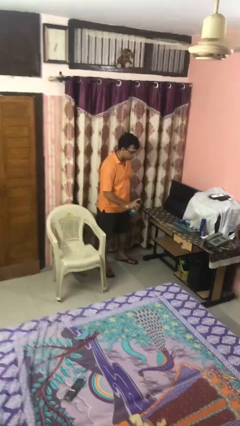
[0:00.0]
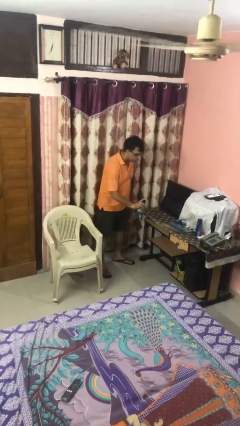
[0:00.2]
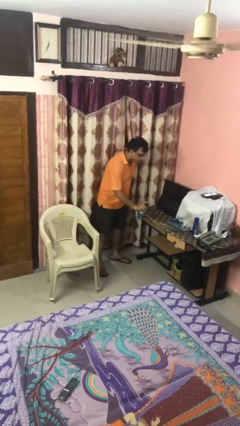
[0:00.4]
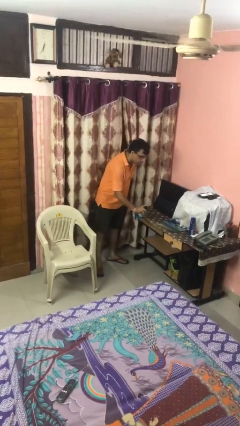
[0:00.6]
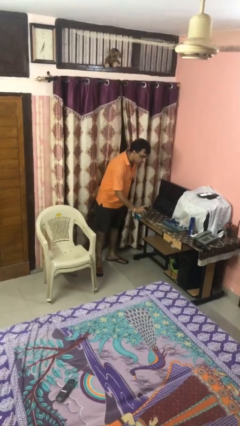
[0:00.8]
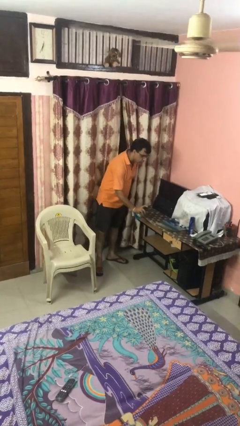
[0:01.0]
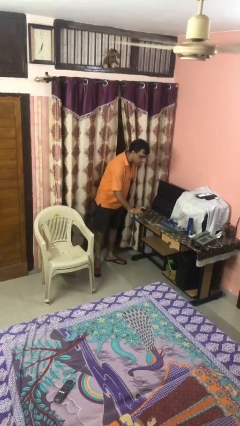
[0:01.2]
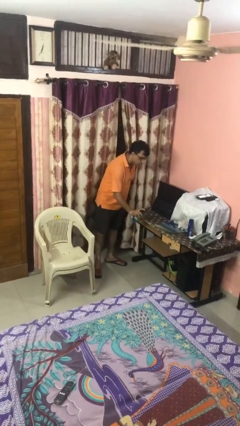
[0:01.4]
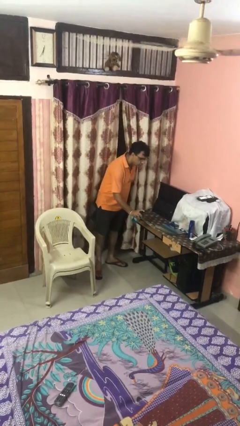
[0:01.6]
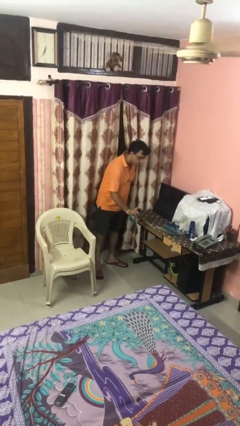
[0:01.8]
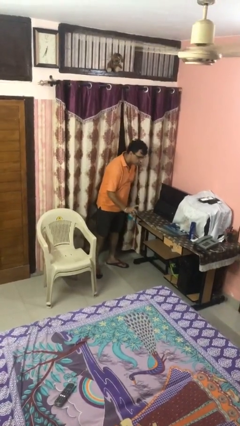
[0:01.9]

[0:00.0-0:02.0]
person sprays from bottle

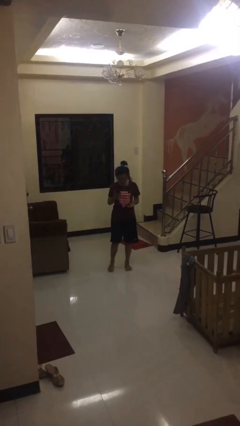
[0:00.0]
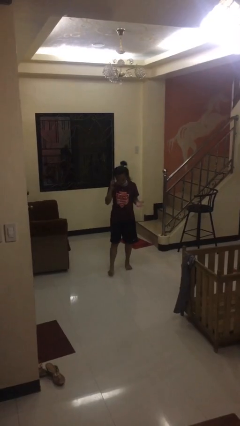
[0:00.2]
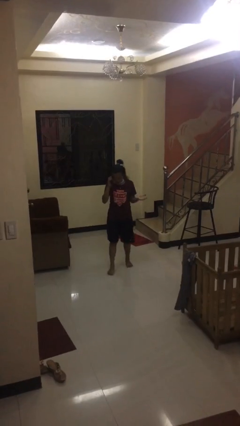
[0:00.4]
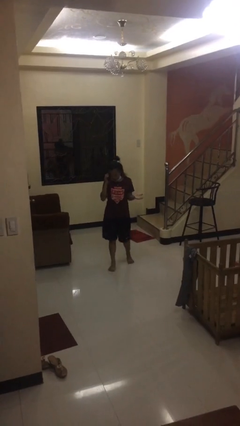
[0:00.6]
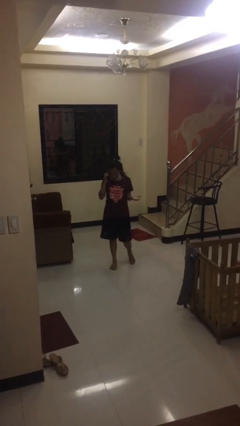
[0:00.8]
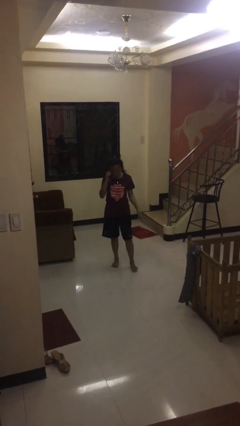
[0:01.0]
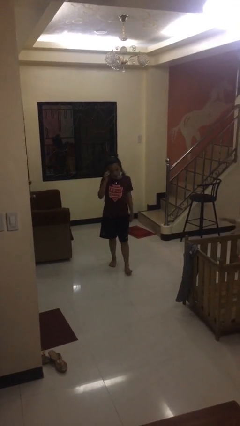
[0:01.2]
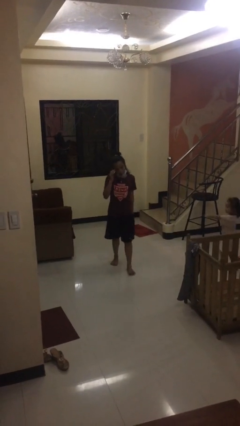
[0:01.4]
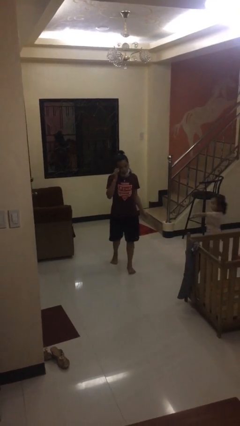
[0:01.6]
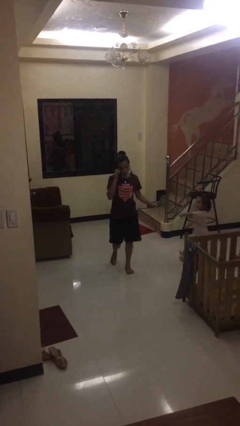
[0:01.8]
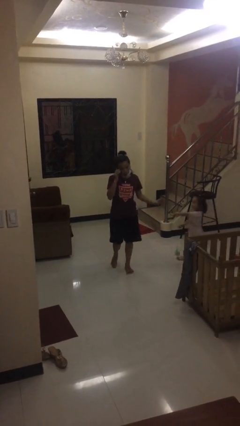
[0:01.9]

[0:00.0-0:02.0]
person talks on phone

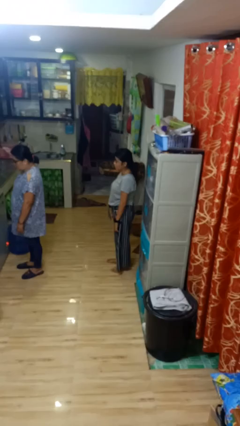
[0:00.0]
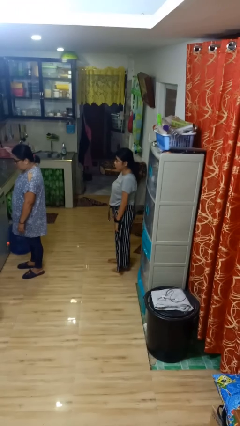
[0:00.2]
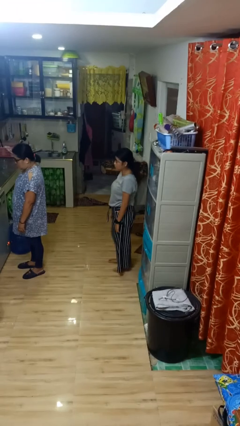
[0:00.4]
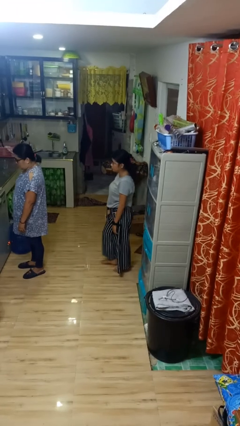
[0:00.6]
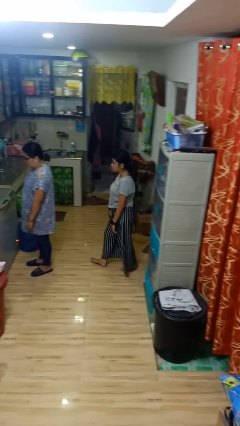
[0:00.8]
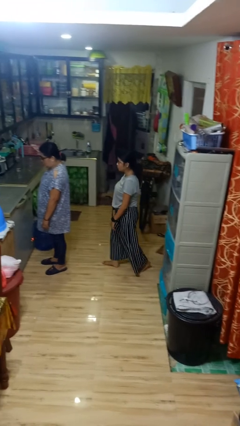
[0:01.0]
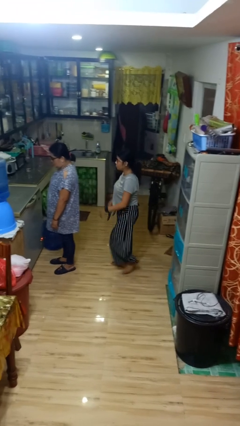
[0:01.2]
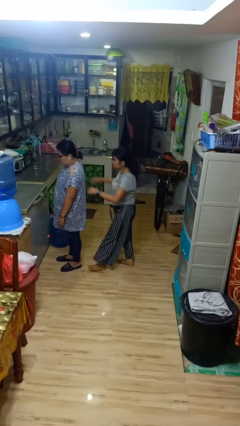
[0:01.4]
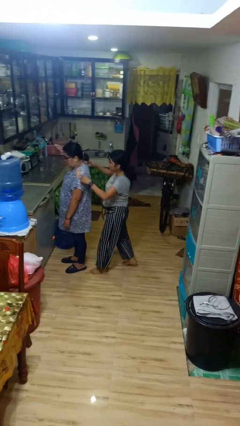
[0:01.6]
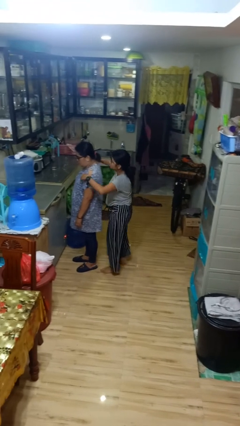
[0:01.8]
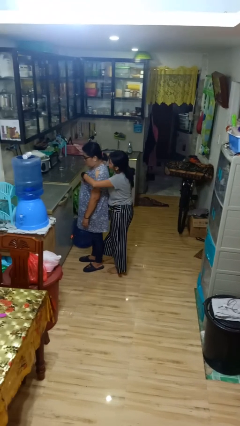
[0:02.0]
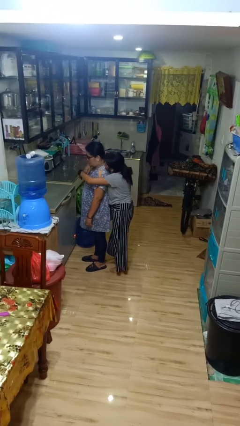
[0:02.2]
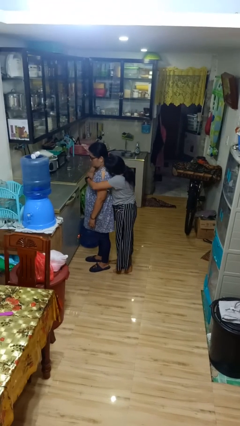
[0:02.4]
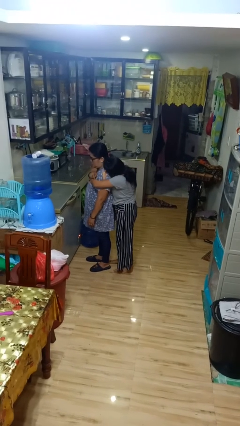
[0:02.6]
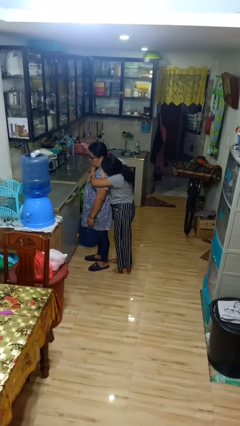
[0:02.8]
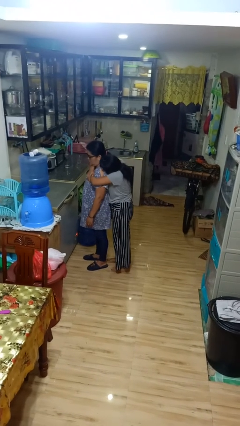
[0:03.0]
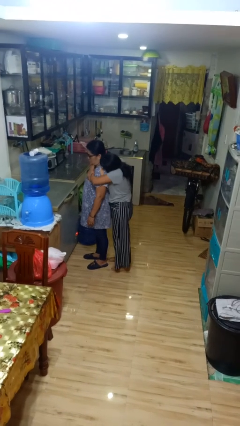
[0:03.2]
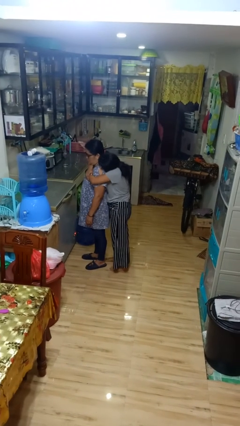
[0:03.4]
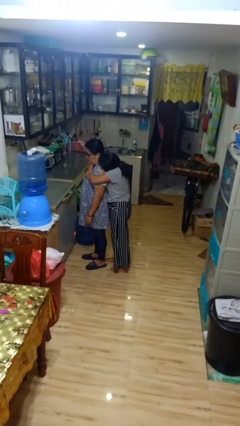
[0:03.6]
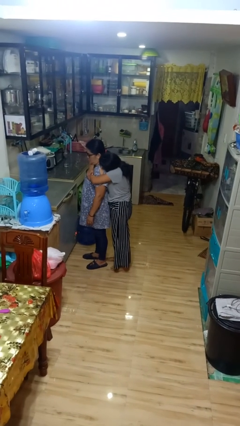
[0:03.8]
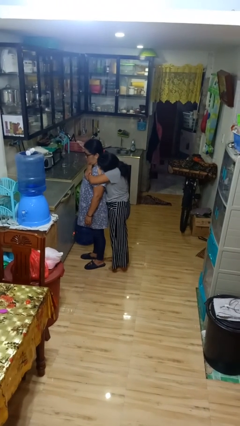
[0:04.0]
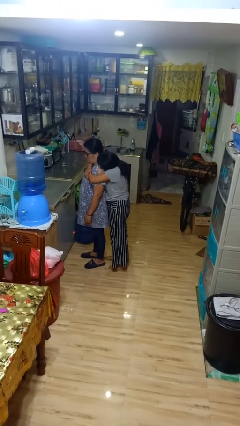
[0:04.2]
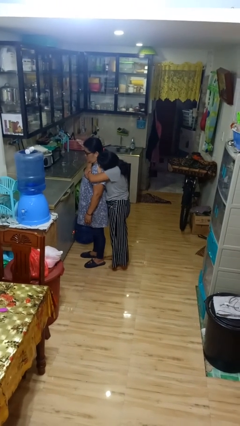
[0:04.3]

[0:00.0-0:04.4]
person hugs person from behind

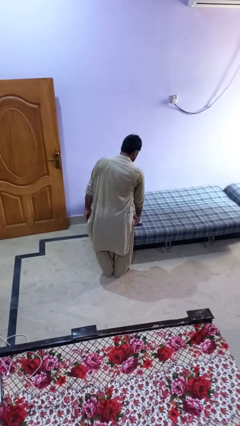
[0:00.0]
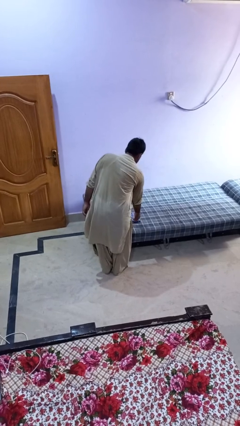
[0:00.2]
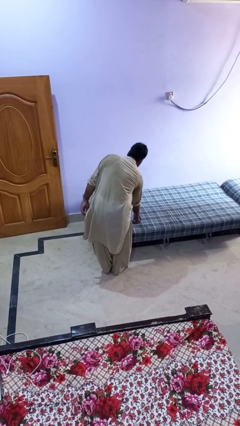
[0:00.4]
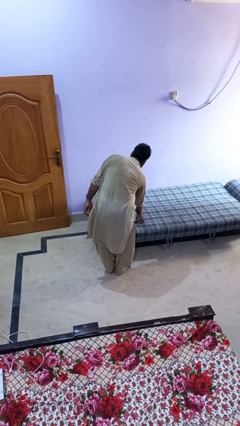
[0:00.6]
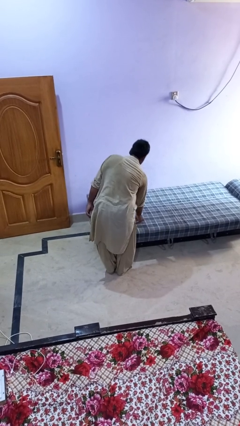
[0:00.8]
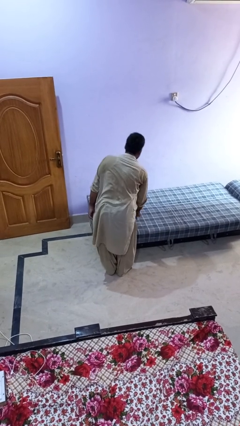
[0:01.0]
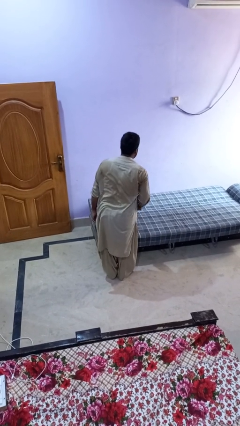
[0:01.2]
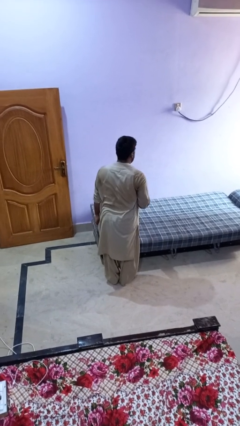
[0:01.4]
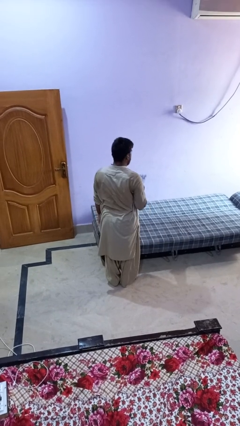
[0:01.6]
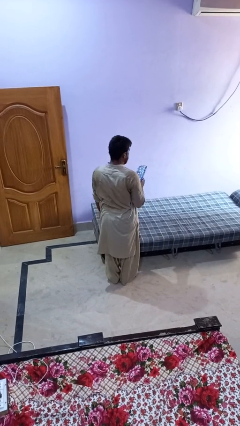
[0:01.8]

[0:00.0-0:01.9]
person picks up object from bed

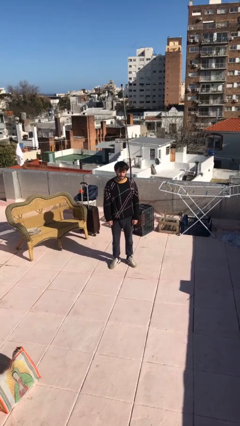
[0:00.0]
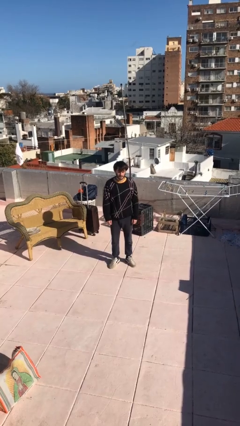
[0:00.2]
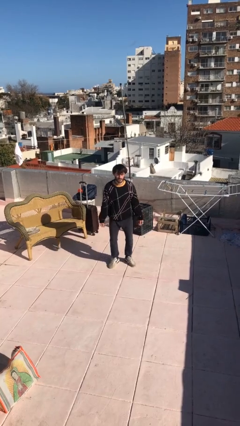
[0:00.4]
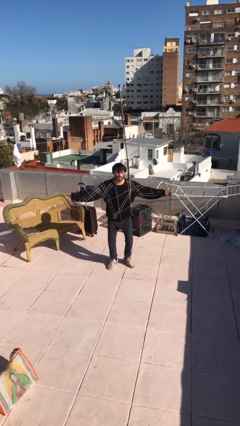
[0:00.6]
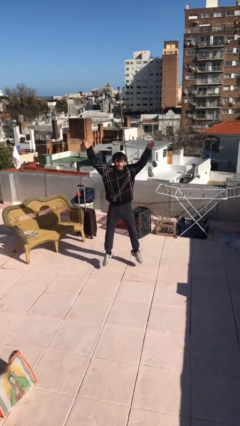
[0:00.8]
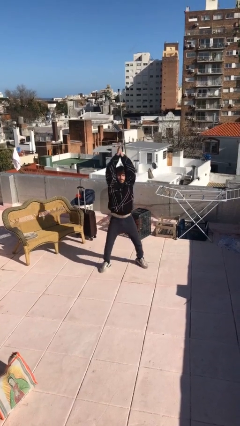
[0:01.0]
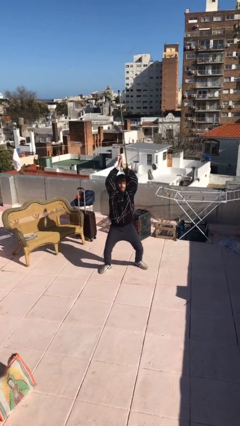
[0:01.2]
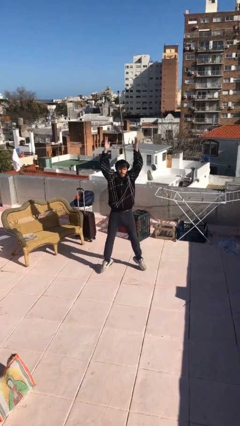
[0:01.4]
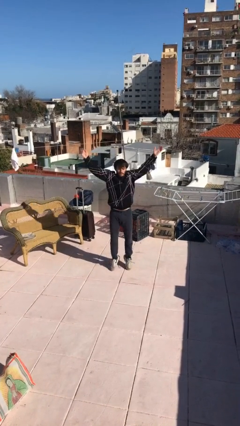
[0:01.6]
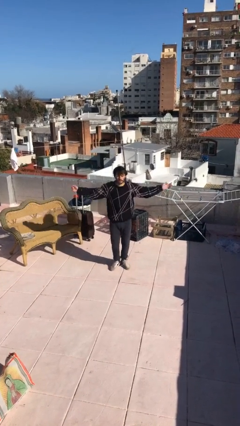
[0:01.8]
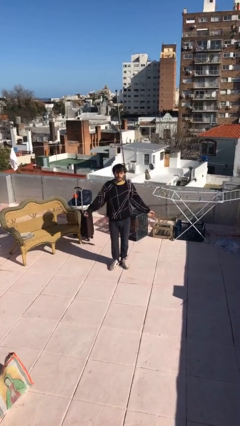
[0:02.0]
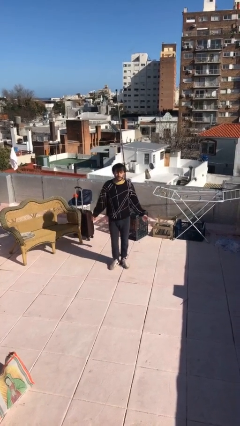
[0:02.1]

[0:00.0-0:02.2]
person exercises with jumping jacks

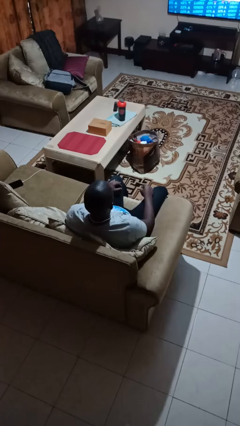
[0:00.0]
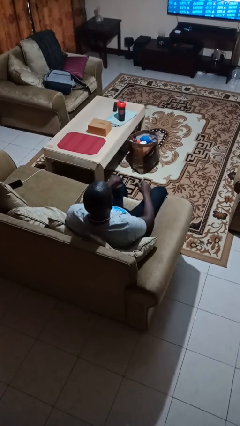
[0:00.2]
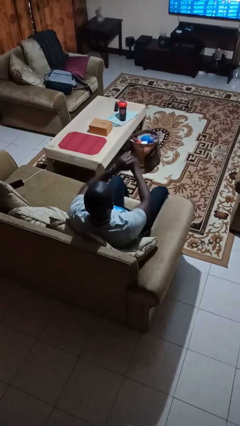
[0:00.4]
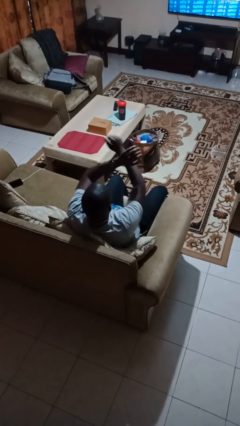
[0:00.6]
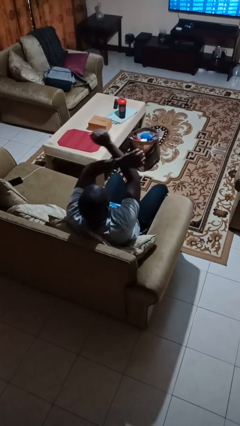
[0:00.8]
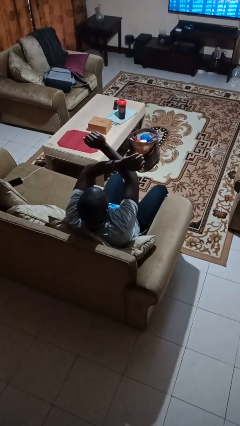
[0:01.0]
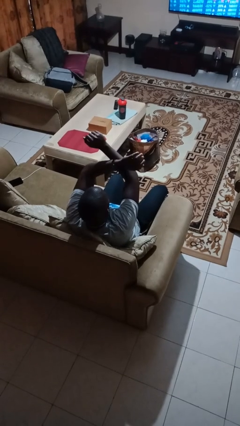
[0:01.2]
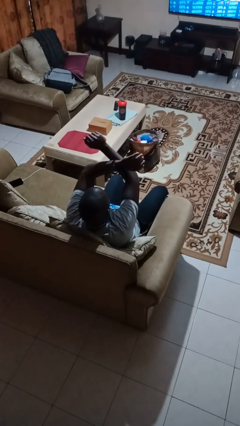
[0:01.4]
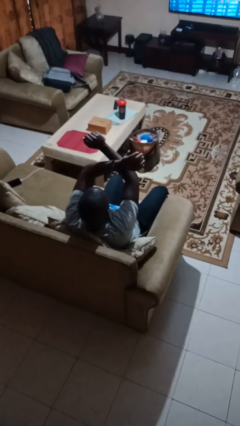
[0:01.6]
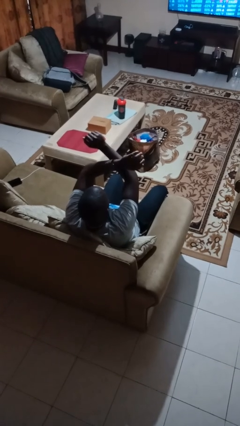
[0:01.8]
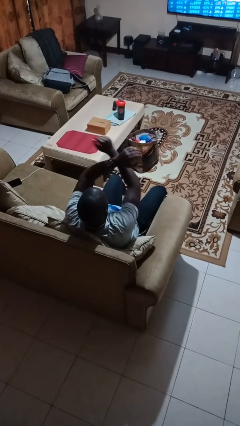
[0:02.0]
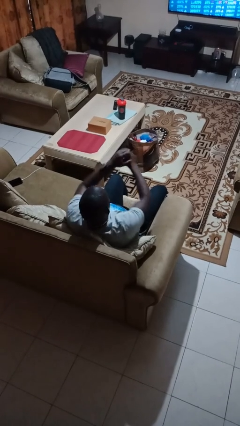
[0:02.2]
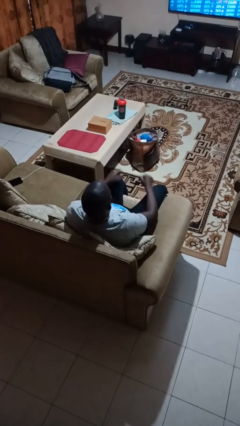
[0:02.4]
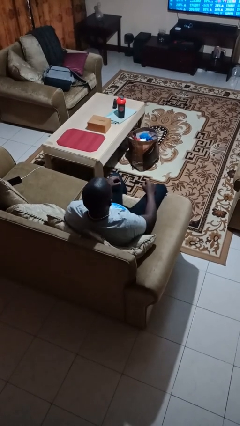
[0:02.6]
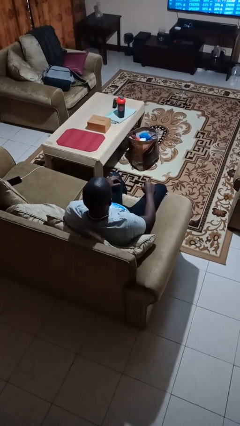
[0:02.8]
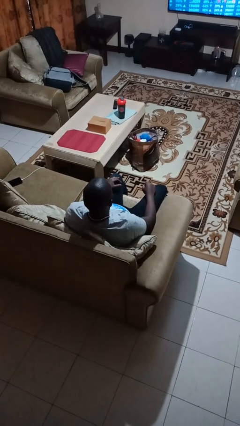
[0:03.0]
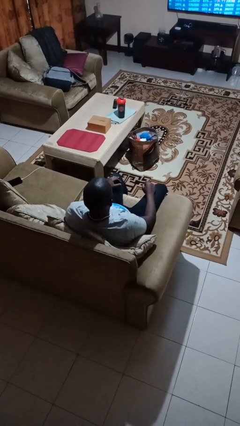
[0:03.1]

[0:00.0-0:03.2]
person gestures arms x

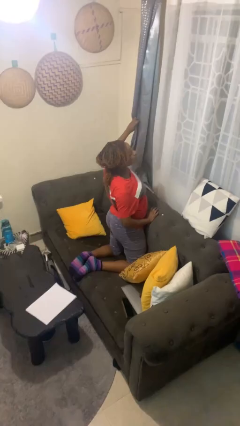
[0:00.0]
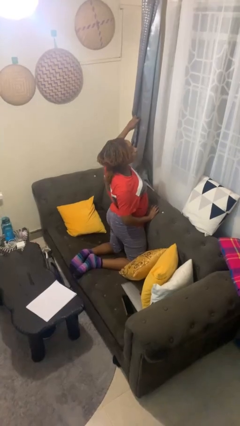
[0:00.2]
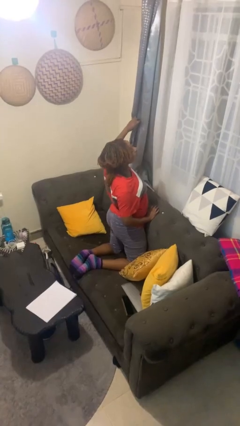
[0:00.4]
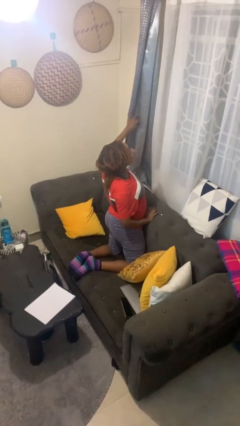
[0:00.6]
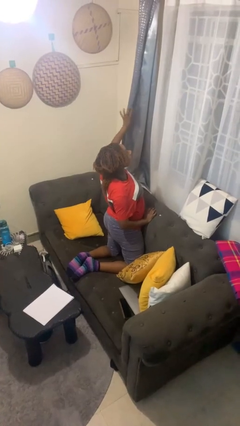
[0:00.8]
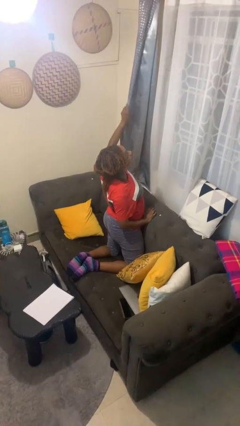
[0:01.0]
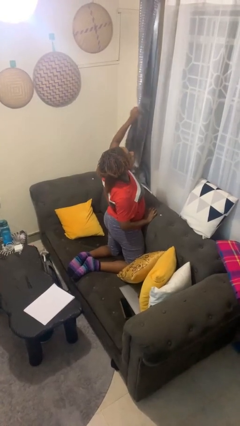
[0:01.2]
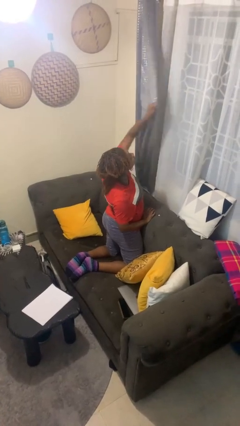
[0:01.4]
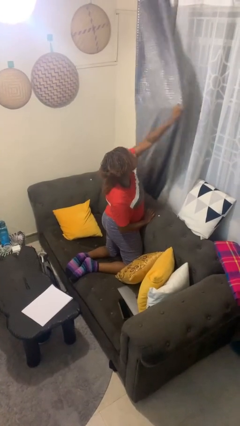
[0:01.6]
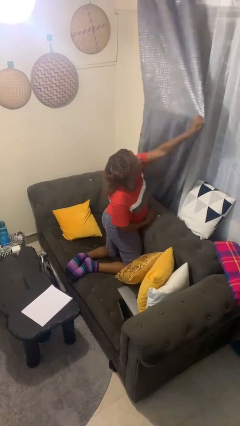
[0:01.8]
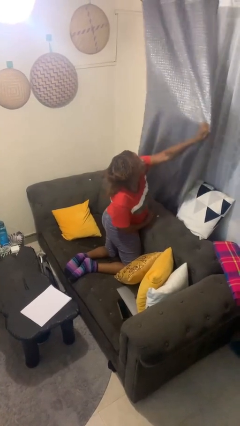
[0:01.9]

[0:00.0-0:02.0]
person closes curtains
